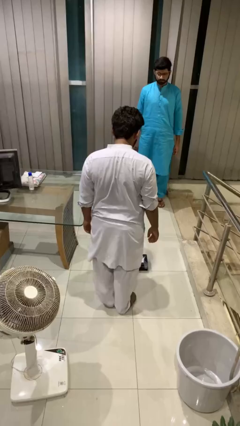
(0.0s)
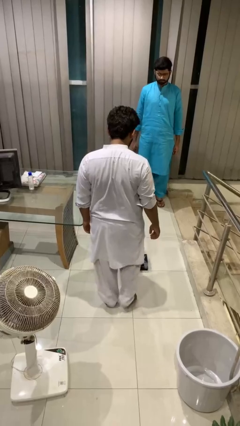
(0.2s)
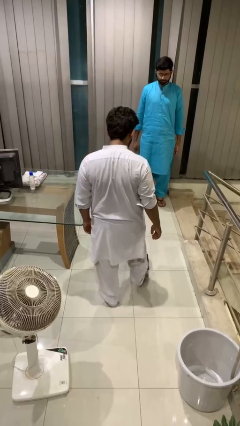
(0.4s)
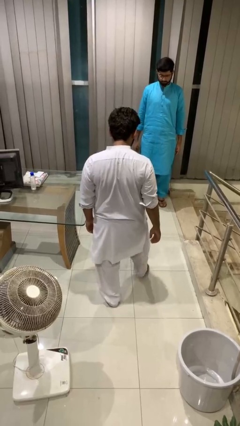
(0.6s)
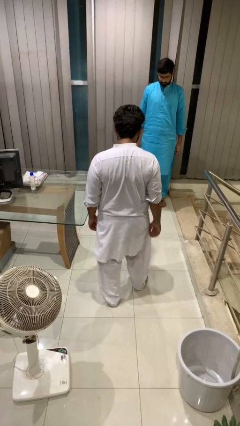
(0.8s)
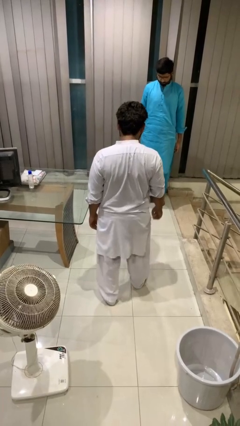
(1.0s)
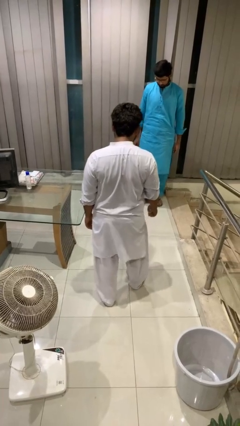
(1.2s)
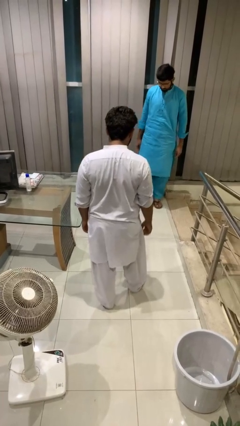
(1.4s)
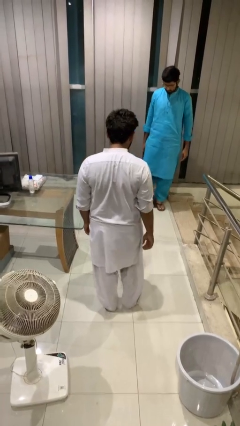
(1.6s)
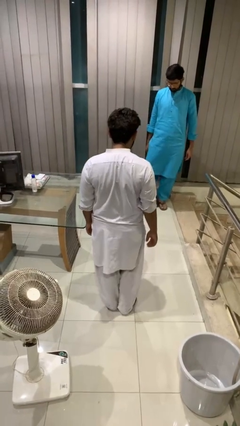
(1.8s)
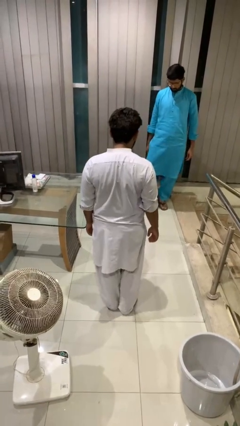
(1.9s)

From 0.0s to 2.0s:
person kicks object to person

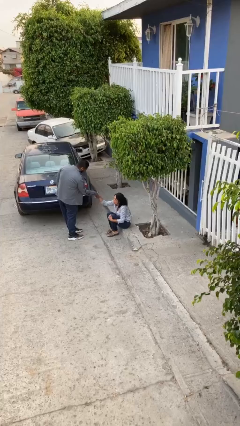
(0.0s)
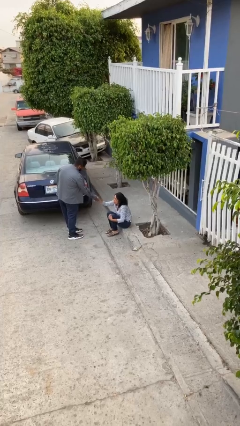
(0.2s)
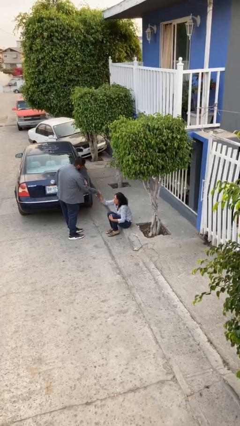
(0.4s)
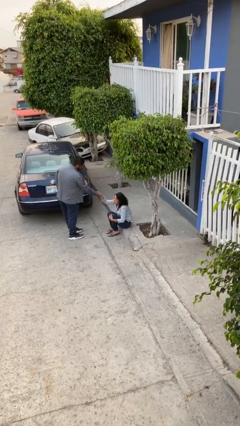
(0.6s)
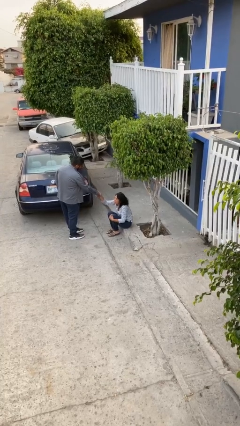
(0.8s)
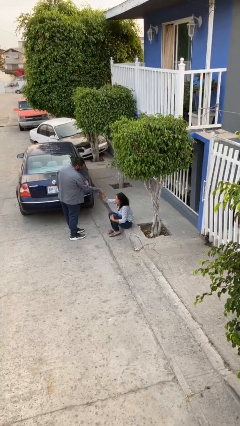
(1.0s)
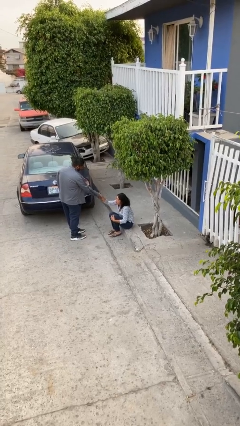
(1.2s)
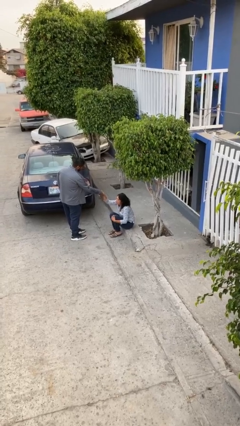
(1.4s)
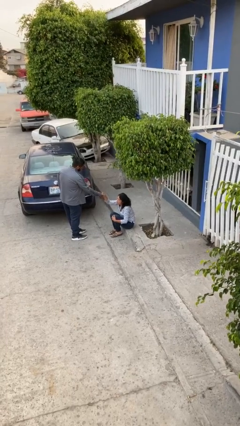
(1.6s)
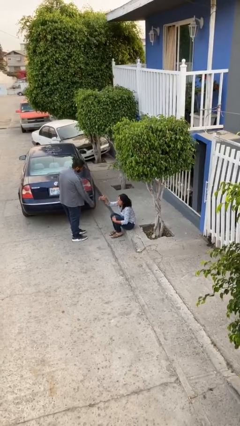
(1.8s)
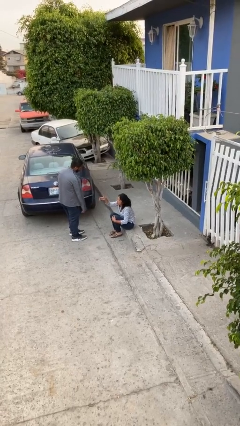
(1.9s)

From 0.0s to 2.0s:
person shakes hand

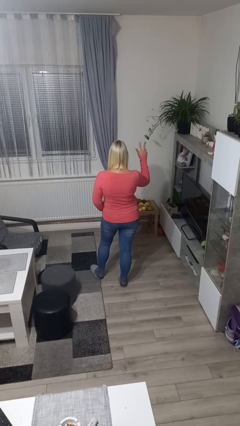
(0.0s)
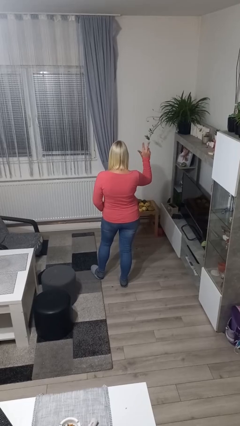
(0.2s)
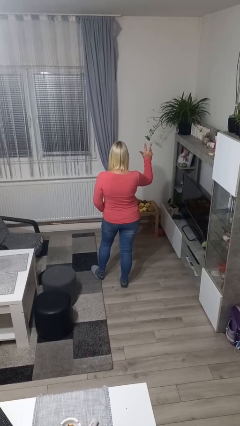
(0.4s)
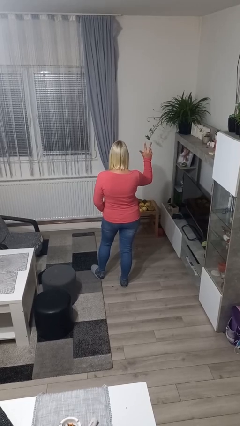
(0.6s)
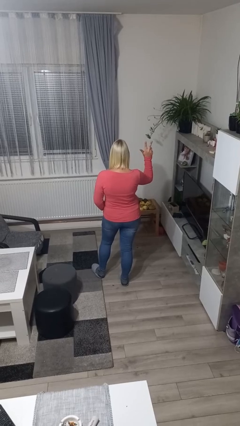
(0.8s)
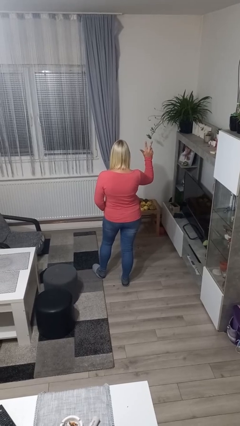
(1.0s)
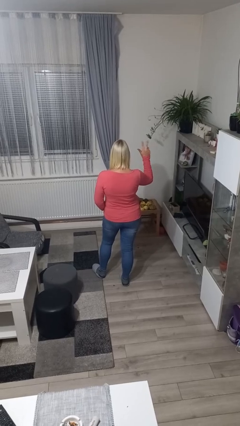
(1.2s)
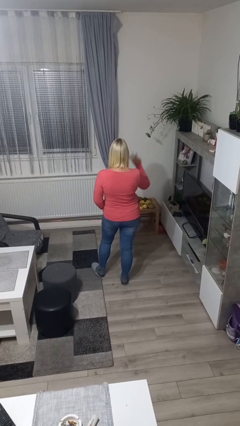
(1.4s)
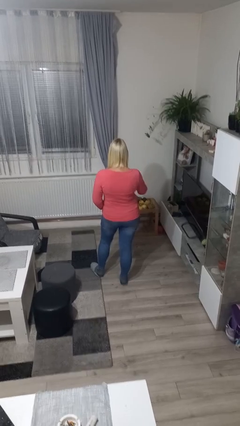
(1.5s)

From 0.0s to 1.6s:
person gestures number three

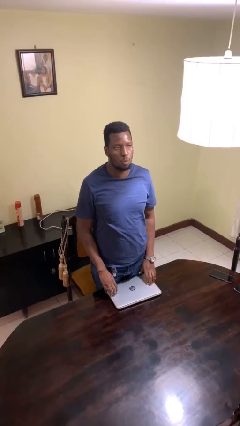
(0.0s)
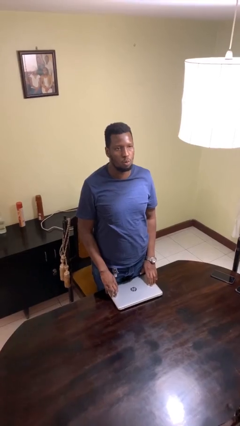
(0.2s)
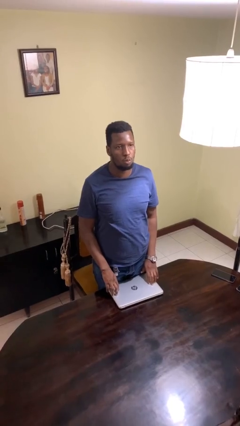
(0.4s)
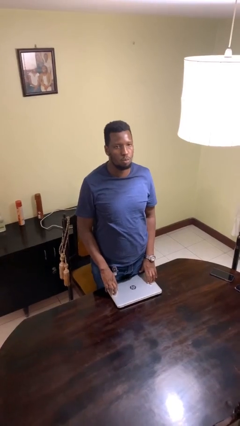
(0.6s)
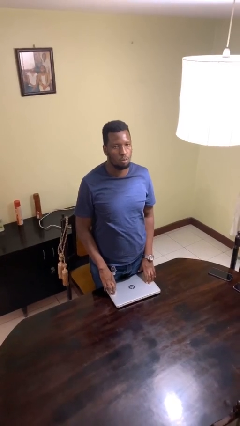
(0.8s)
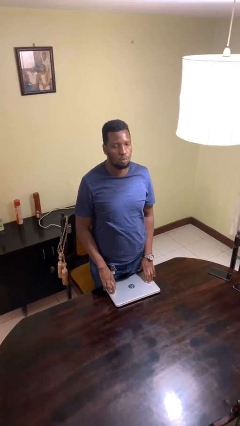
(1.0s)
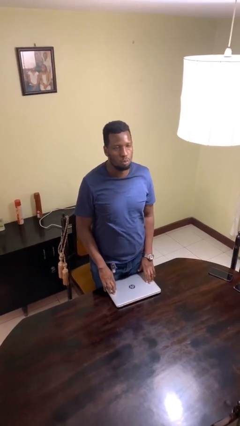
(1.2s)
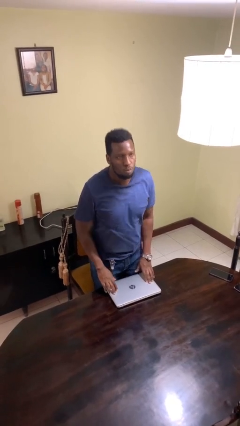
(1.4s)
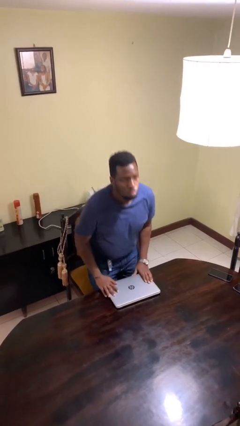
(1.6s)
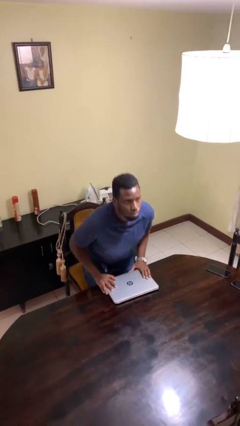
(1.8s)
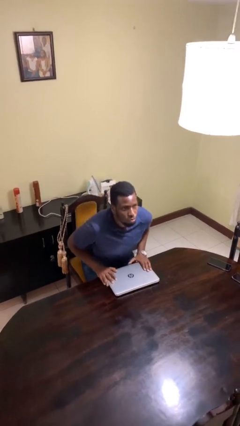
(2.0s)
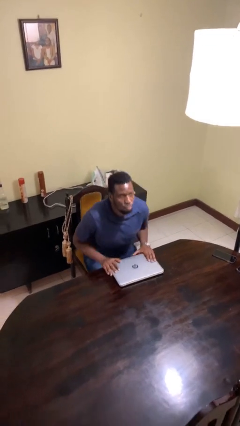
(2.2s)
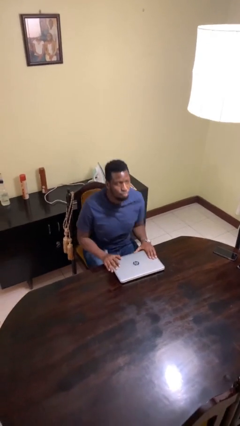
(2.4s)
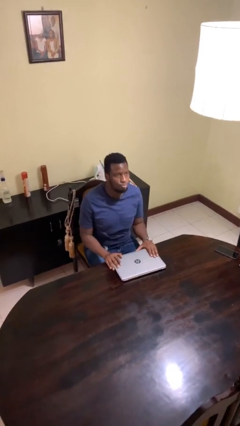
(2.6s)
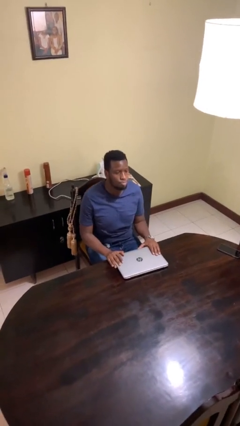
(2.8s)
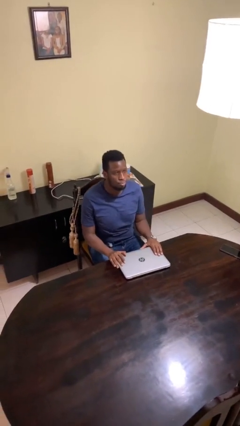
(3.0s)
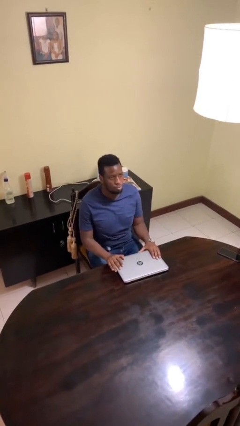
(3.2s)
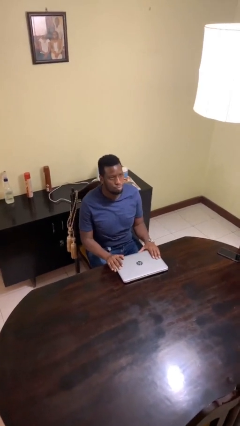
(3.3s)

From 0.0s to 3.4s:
person sits down

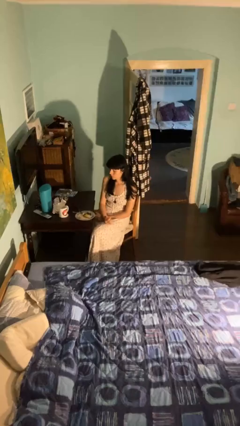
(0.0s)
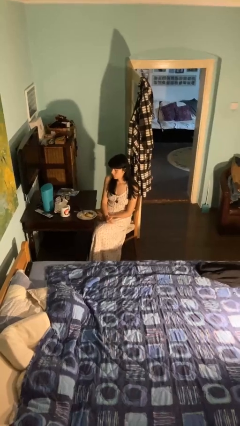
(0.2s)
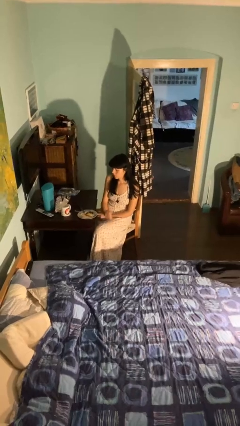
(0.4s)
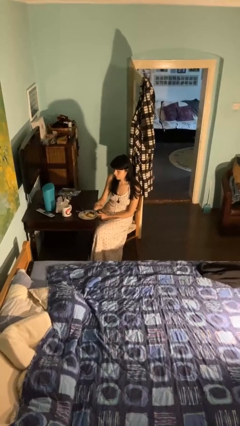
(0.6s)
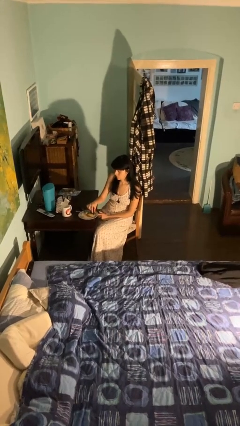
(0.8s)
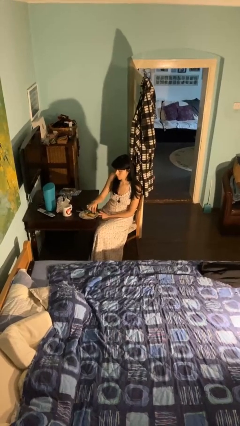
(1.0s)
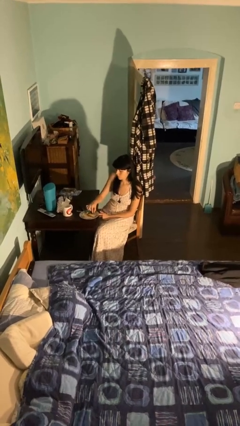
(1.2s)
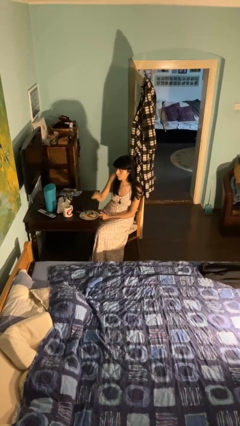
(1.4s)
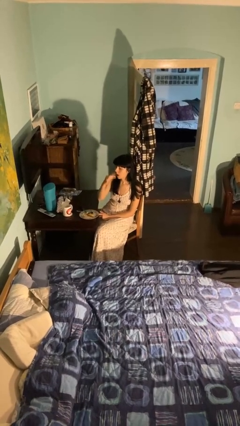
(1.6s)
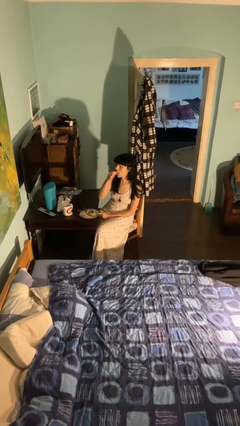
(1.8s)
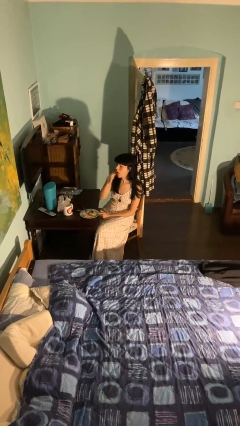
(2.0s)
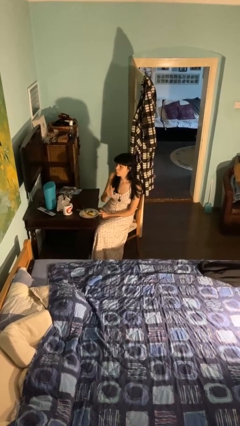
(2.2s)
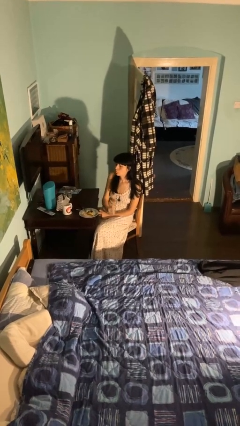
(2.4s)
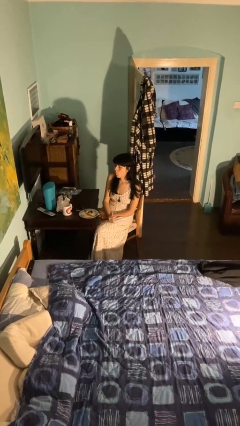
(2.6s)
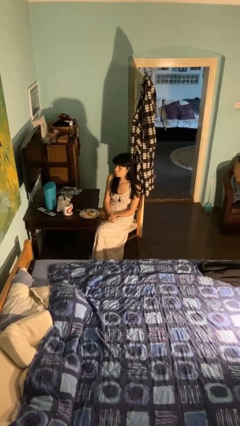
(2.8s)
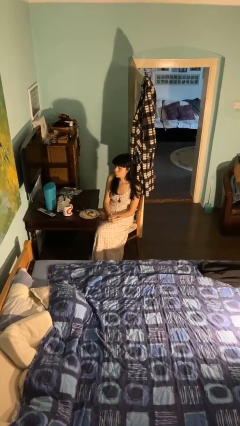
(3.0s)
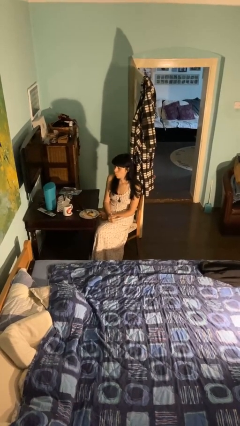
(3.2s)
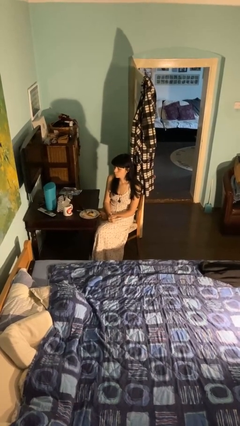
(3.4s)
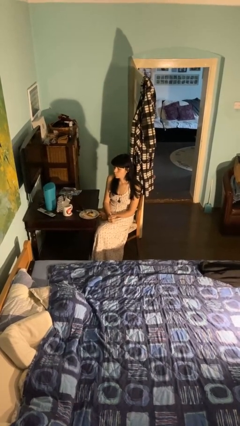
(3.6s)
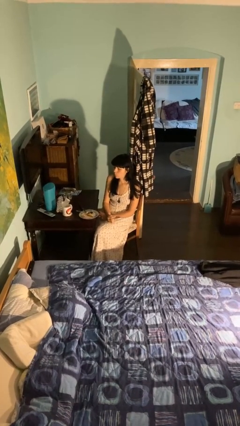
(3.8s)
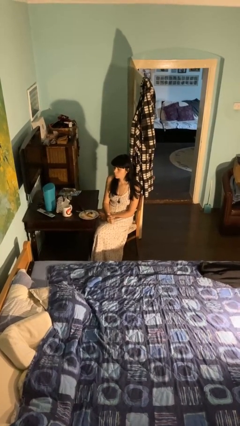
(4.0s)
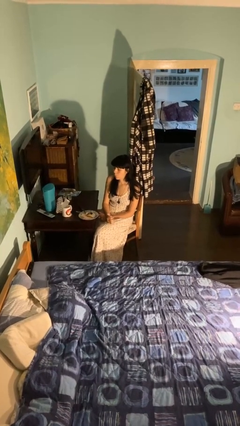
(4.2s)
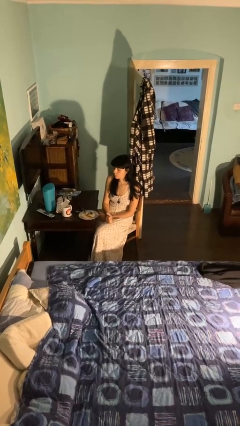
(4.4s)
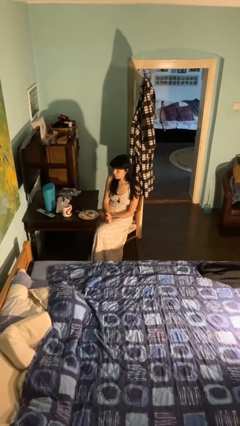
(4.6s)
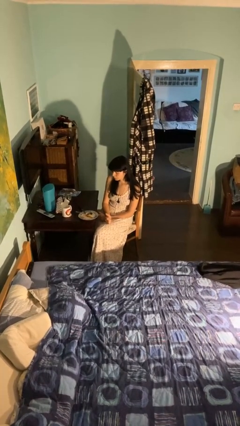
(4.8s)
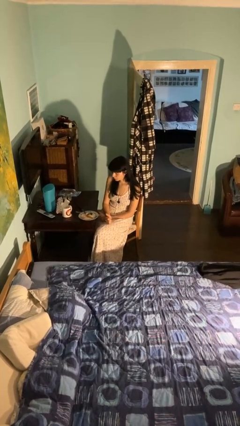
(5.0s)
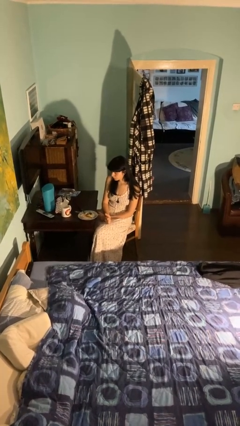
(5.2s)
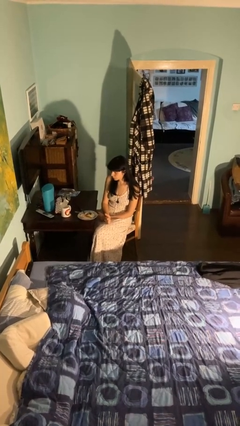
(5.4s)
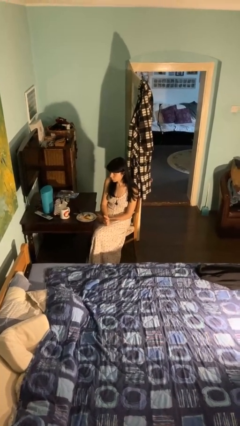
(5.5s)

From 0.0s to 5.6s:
person eats with hands

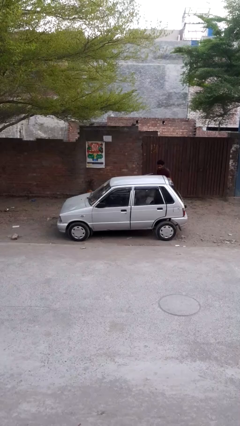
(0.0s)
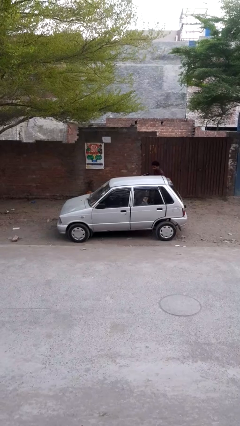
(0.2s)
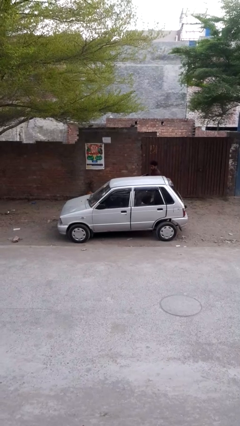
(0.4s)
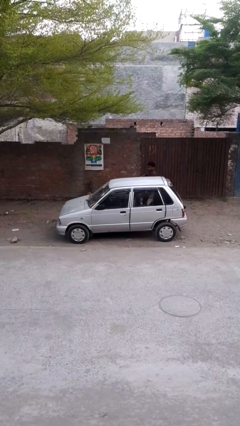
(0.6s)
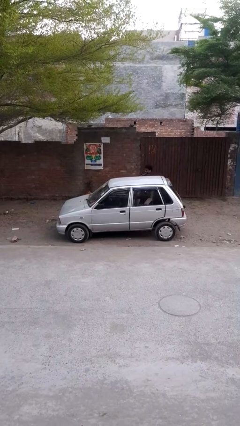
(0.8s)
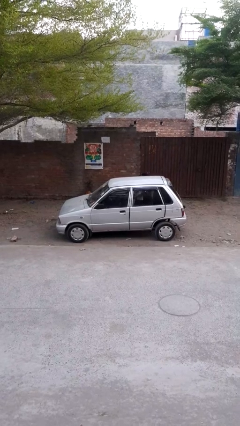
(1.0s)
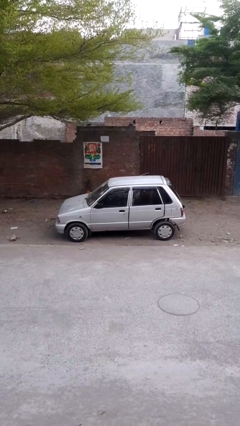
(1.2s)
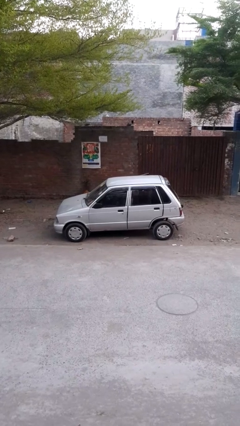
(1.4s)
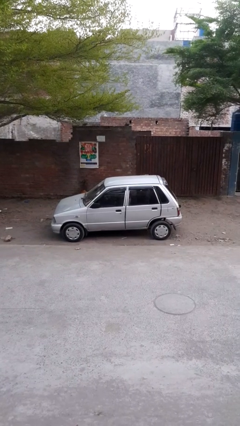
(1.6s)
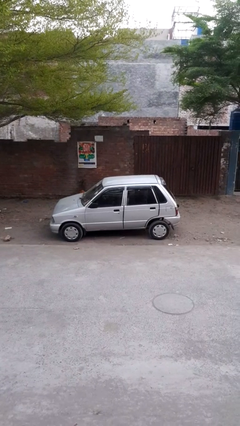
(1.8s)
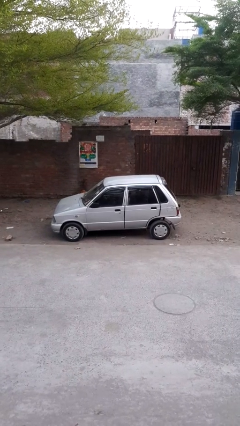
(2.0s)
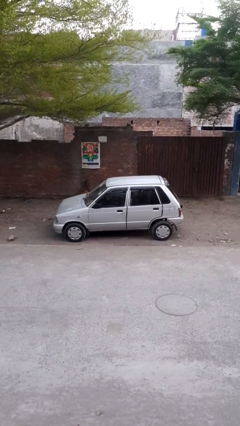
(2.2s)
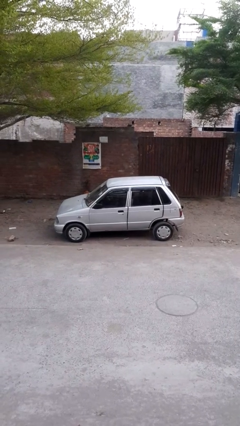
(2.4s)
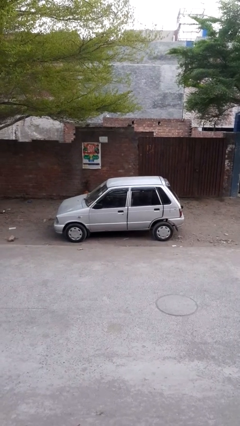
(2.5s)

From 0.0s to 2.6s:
car picks up person

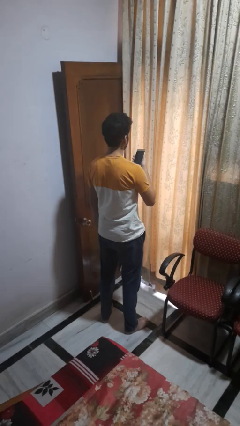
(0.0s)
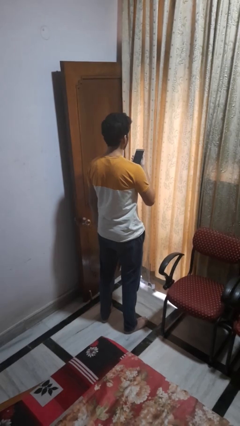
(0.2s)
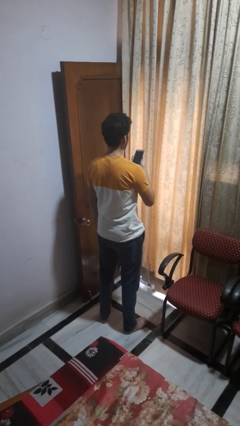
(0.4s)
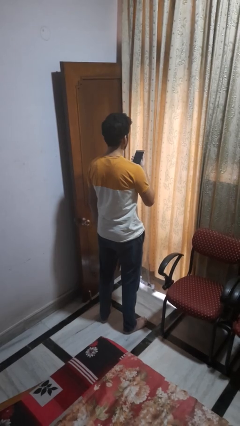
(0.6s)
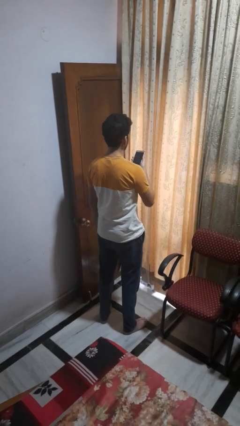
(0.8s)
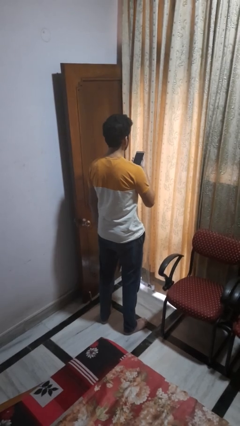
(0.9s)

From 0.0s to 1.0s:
person puts phone into pocket
